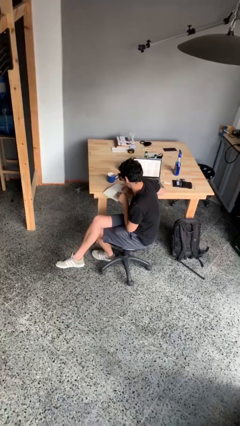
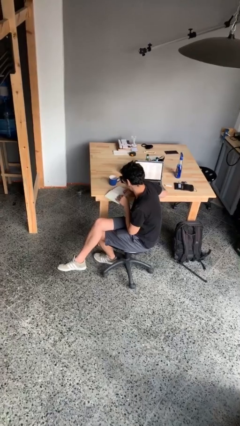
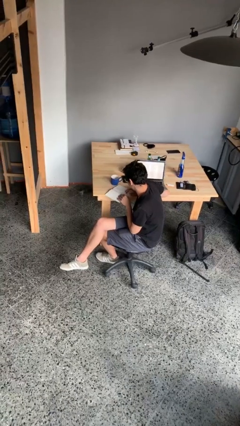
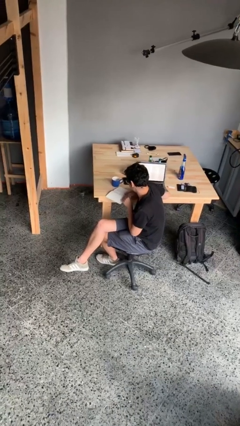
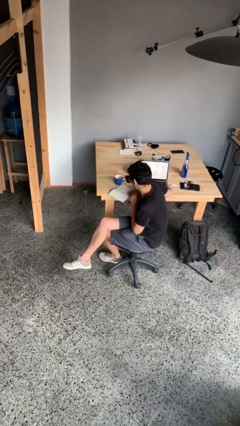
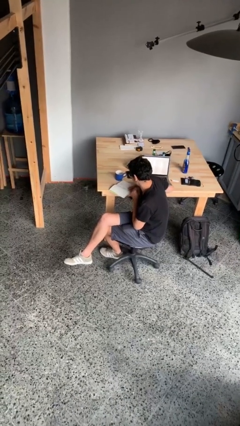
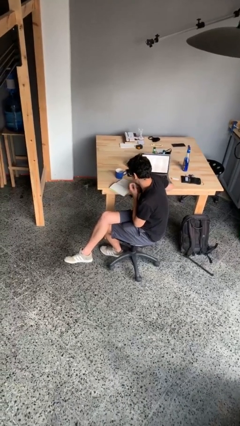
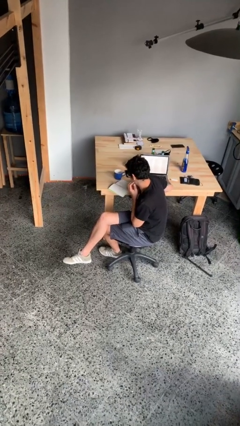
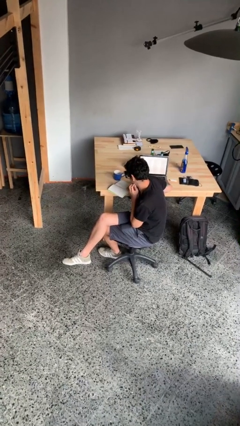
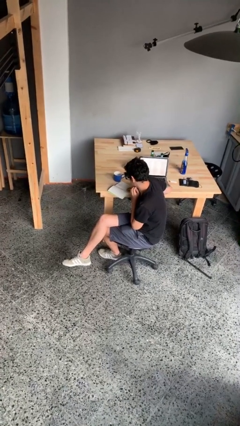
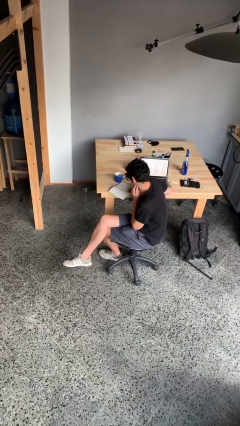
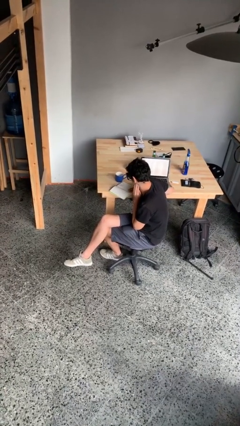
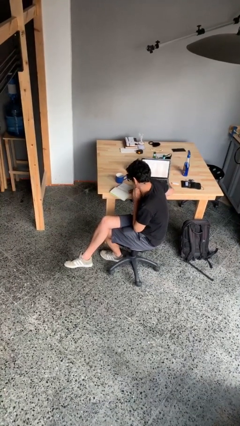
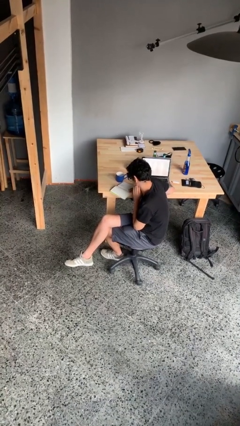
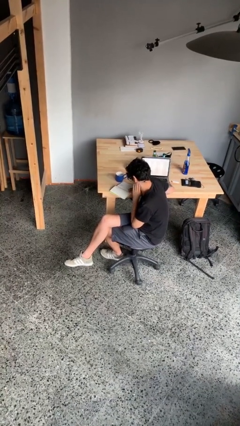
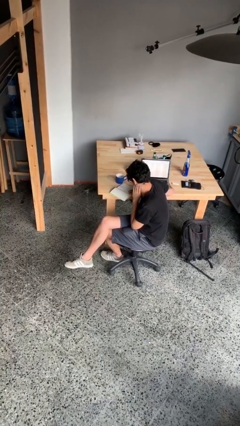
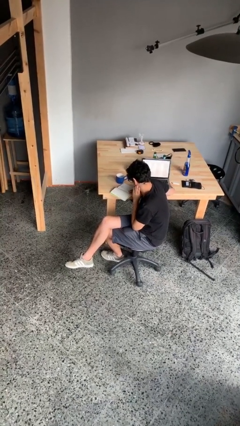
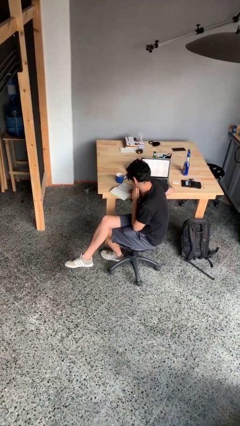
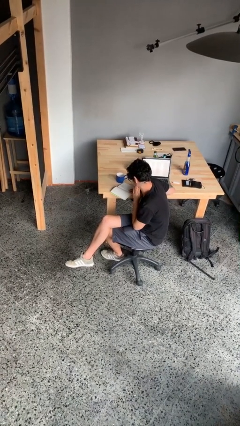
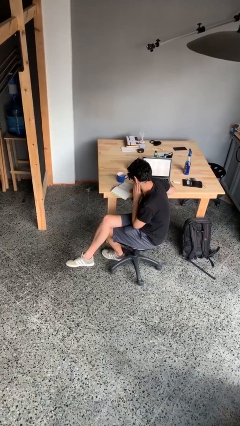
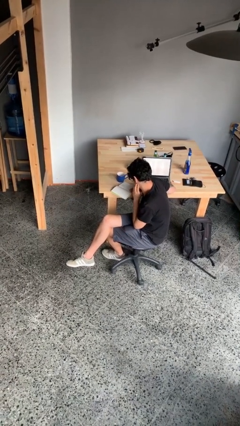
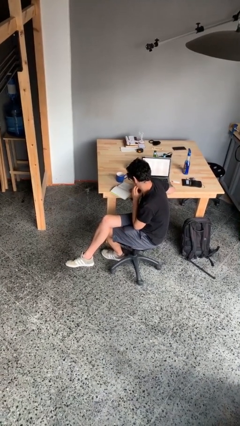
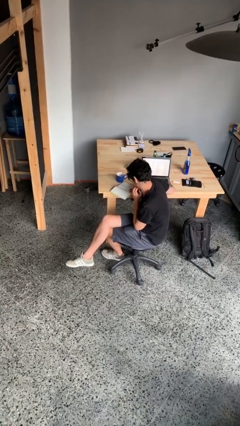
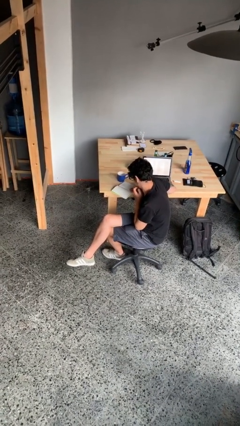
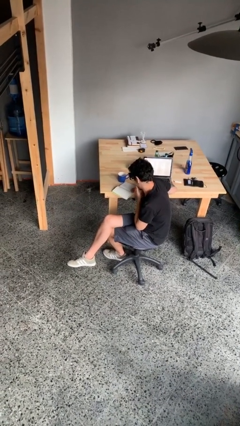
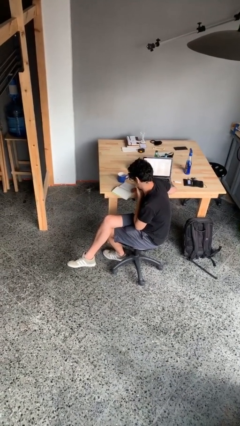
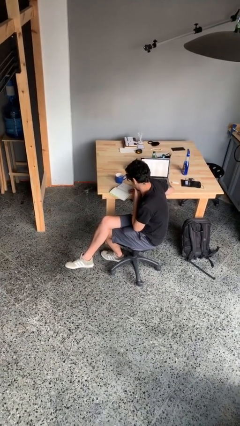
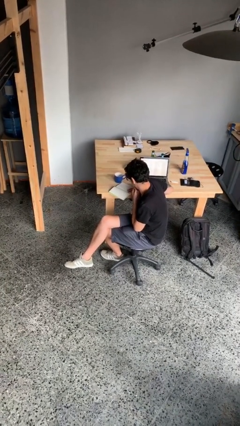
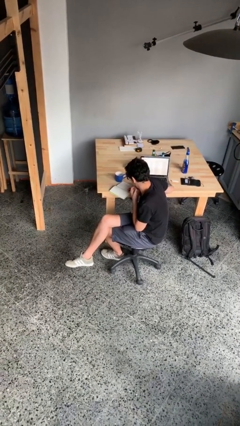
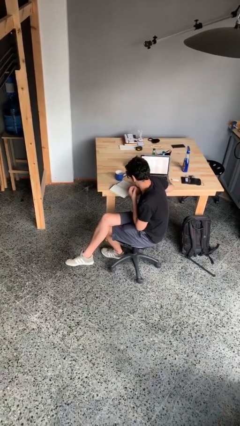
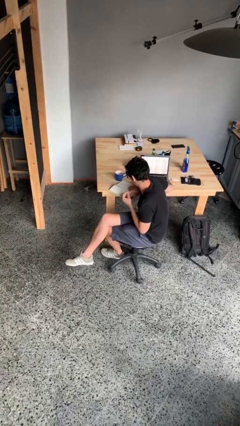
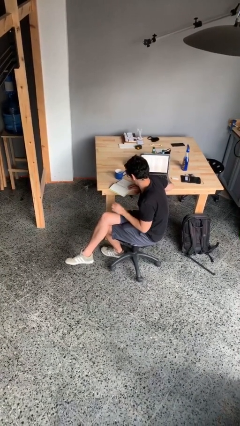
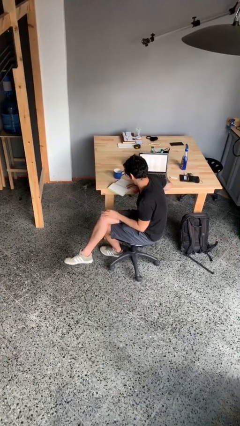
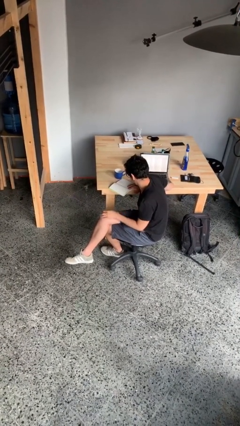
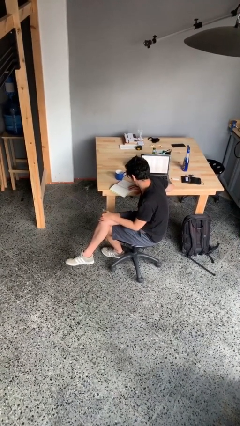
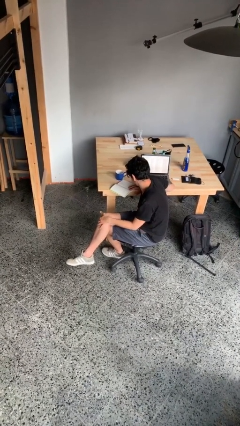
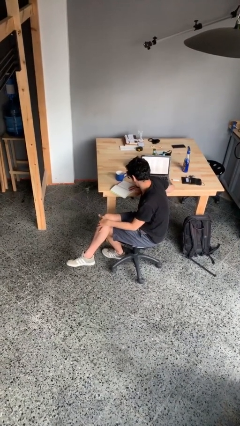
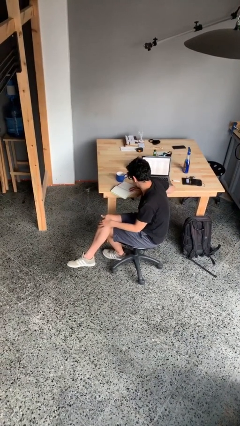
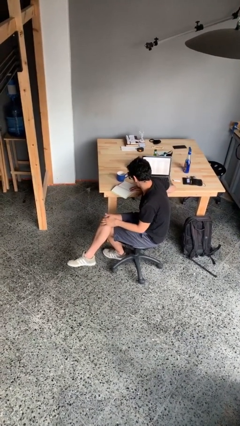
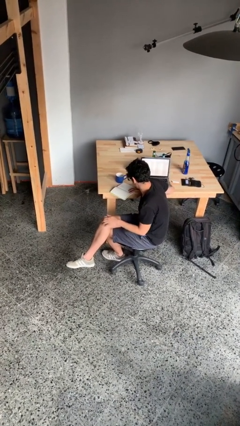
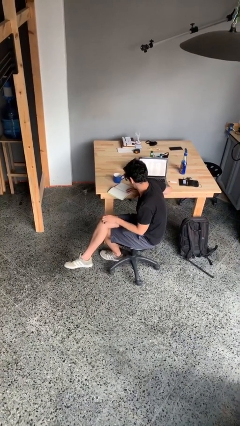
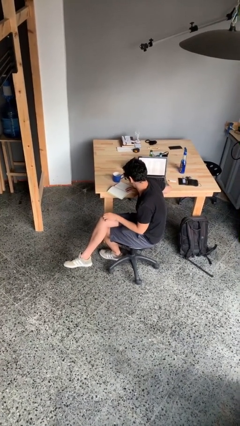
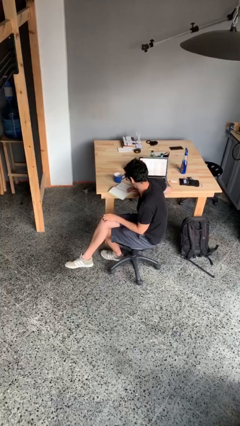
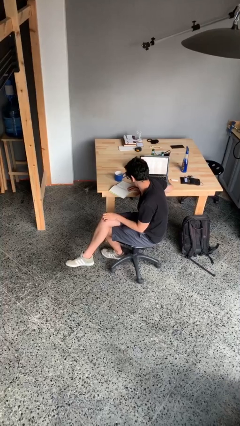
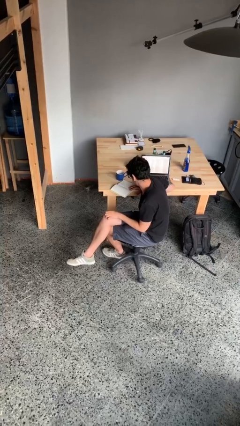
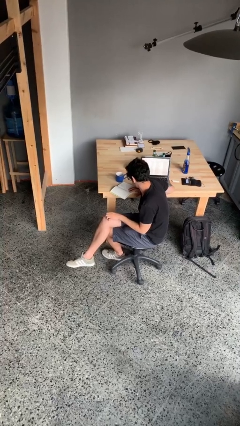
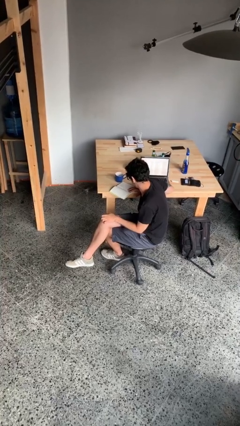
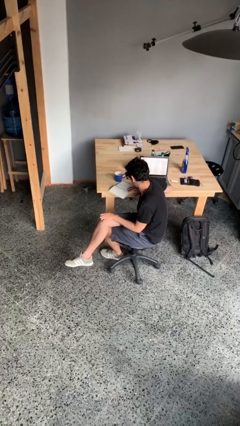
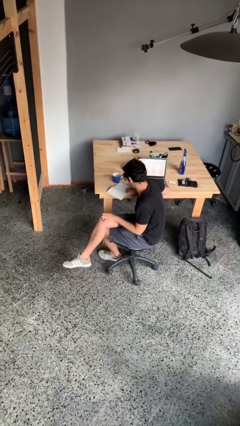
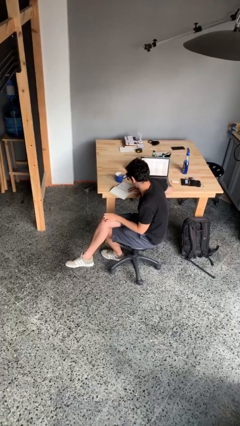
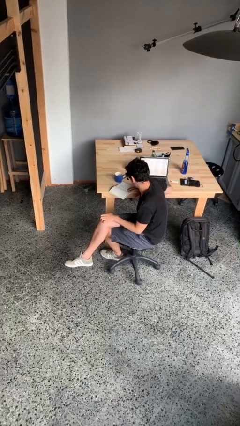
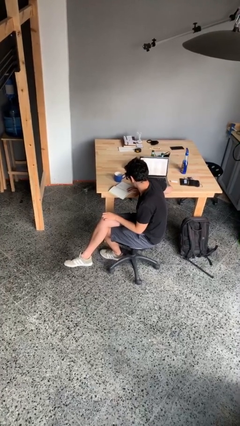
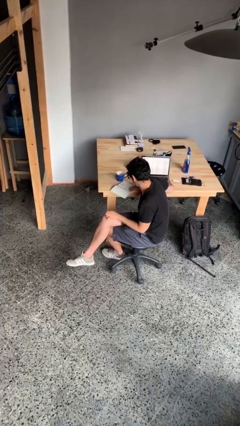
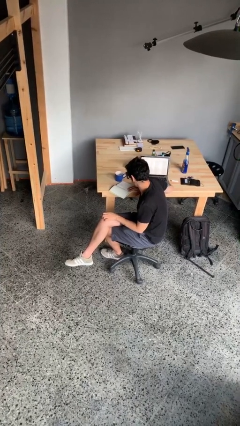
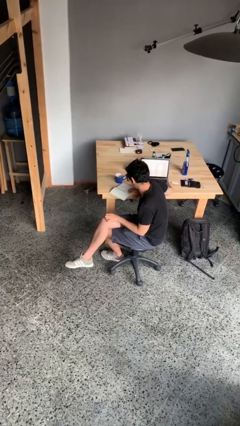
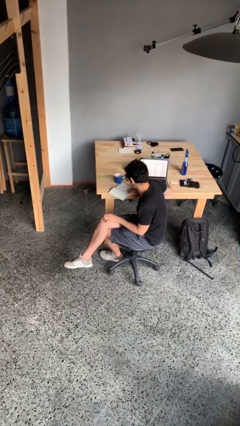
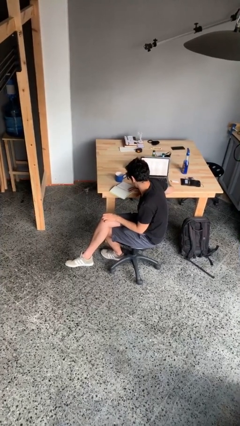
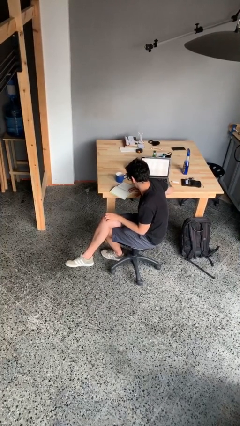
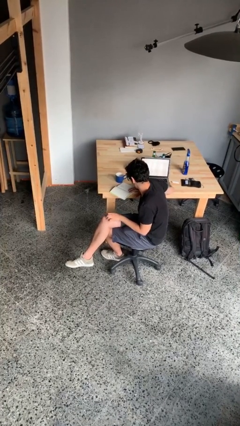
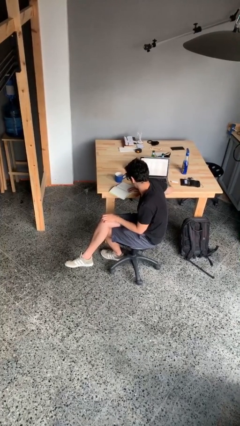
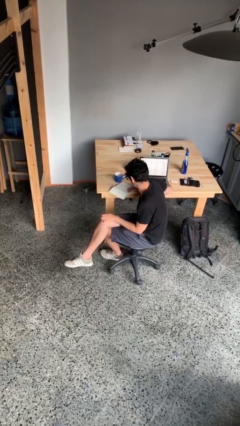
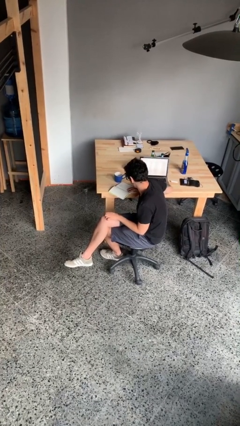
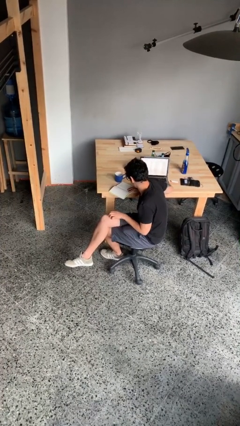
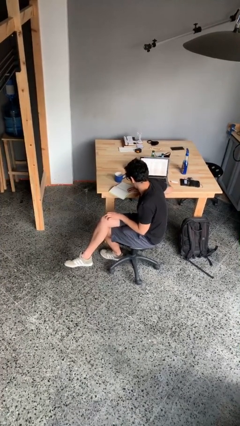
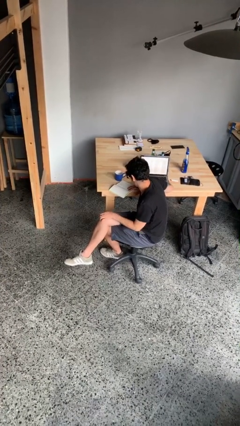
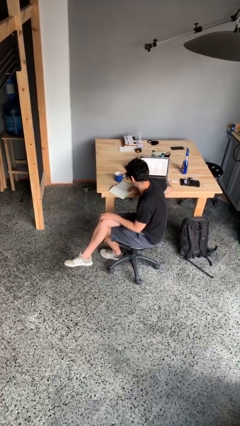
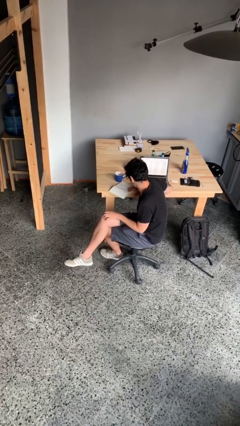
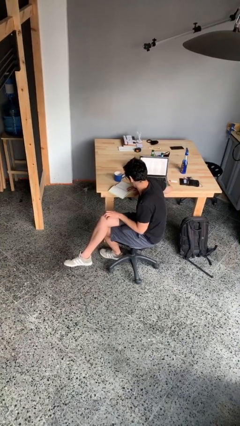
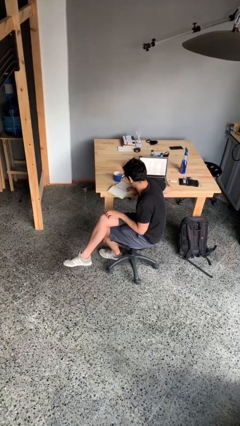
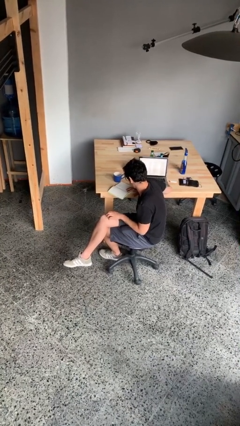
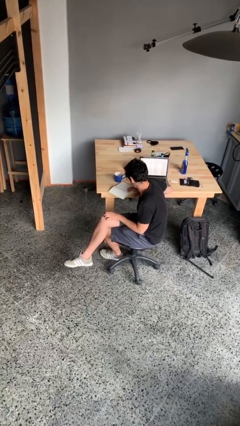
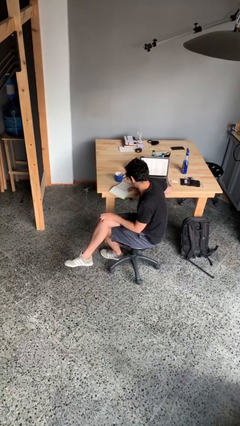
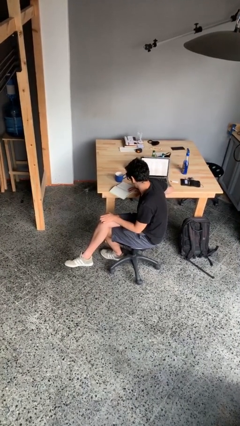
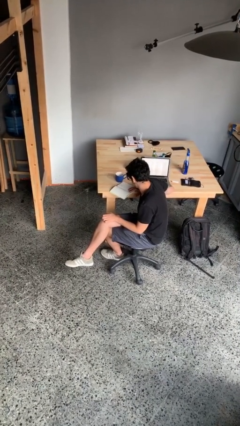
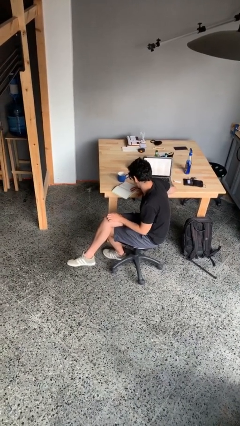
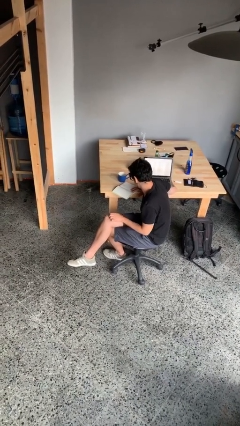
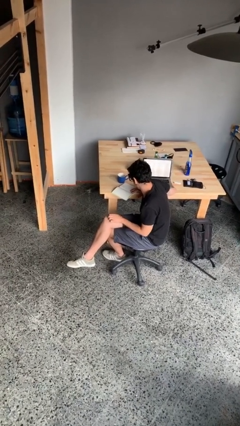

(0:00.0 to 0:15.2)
person reads document

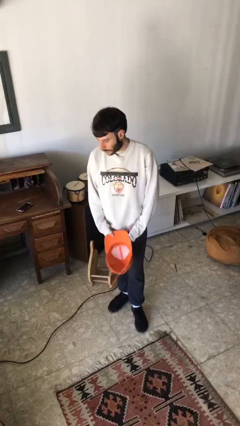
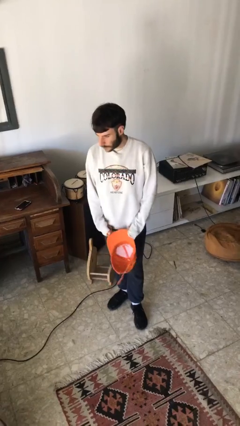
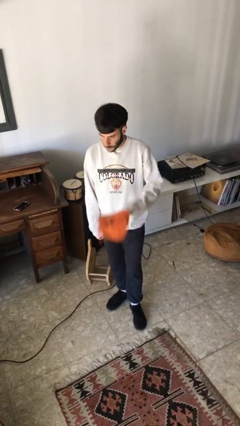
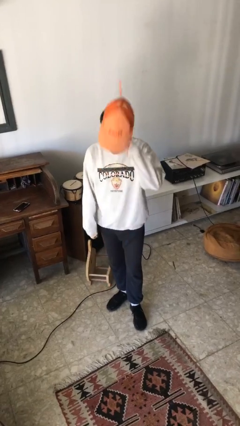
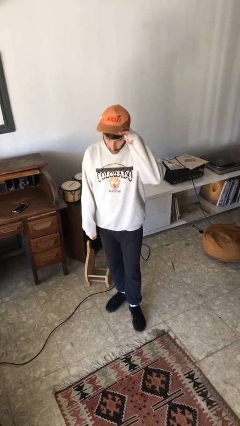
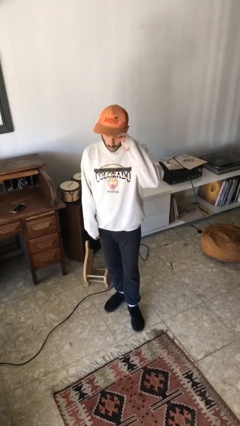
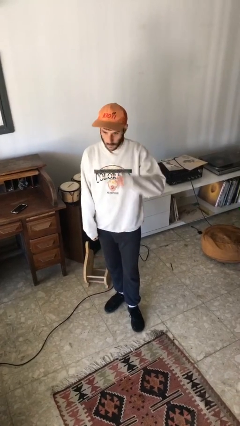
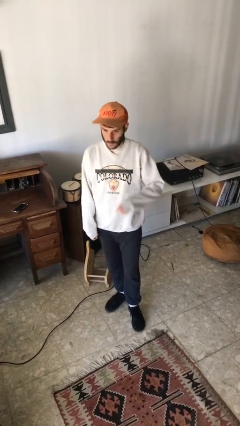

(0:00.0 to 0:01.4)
person puts on hat

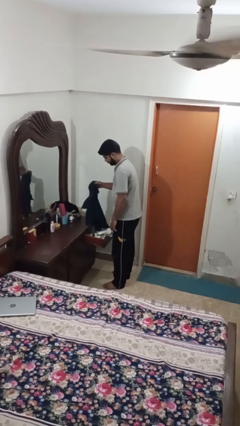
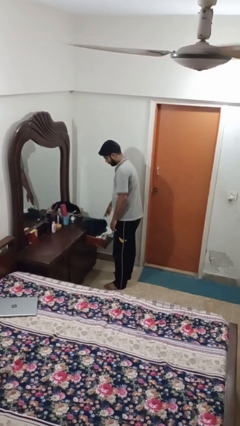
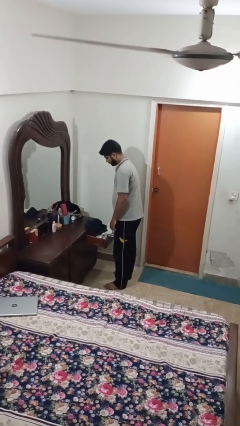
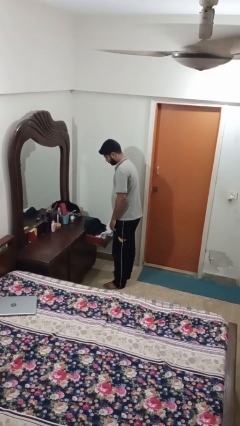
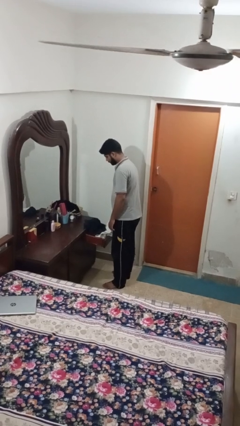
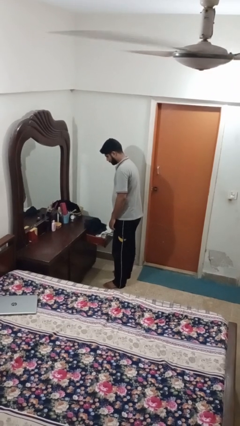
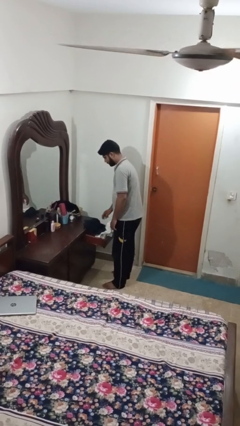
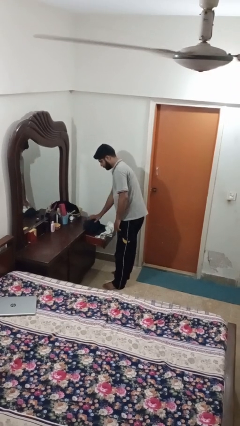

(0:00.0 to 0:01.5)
person puts clothes into dresser

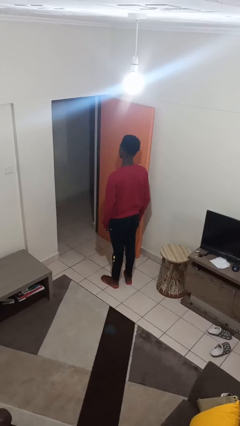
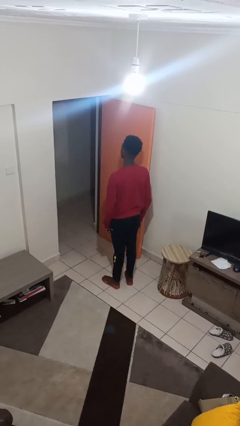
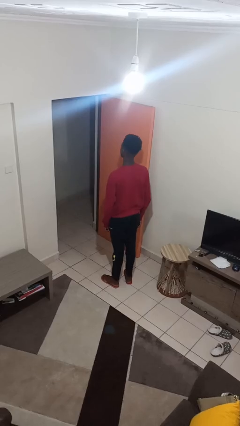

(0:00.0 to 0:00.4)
person punches
